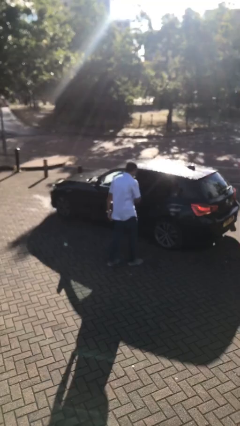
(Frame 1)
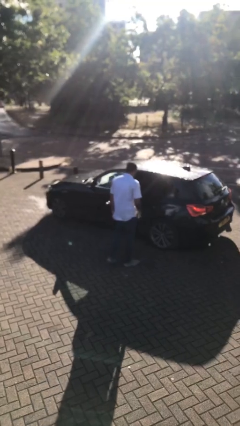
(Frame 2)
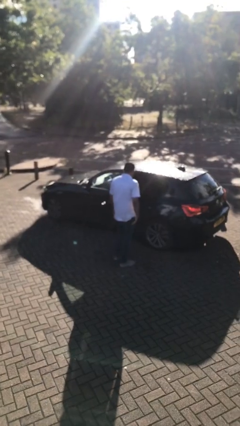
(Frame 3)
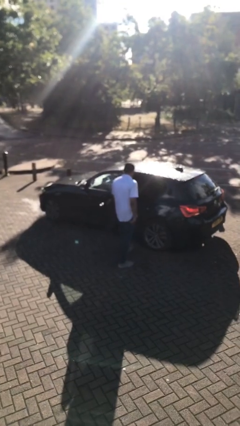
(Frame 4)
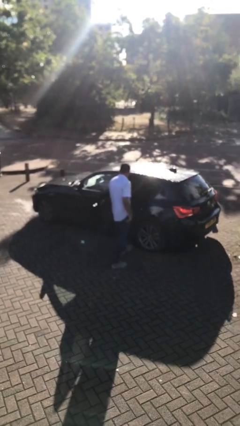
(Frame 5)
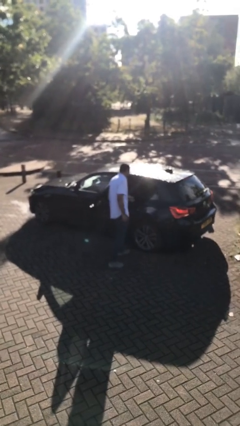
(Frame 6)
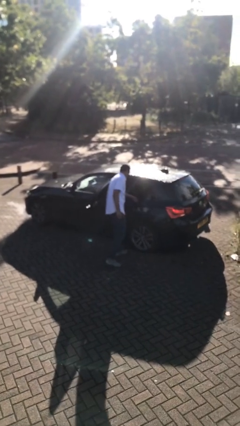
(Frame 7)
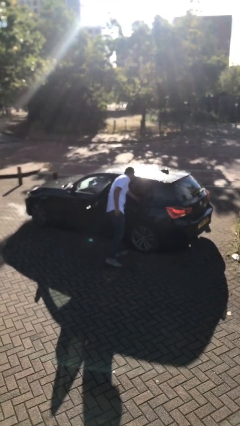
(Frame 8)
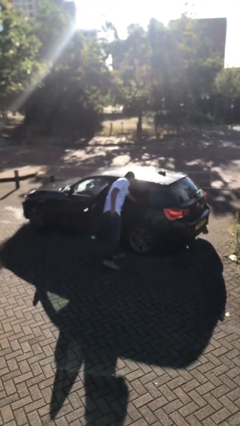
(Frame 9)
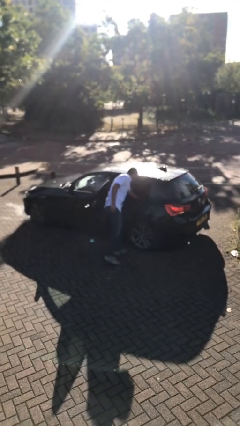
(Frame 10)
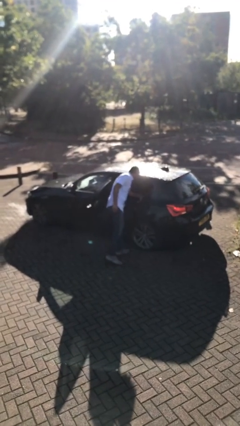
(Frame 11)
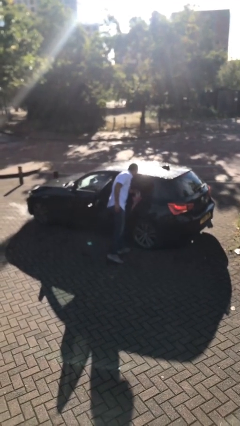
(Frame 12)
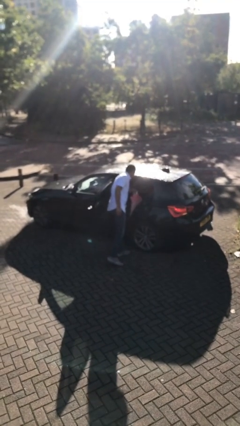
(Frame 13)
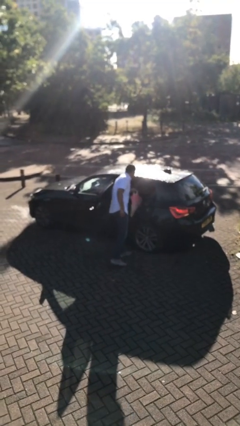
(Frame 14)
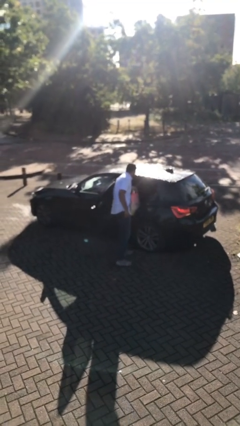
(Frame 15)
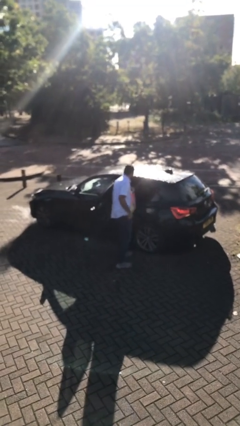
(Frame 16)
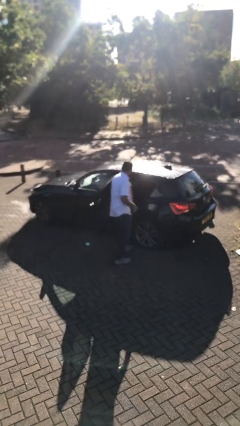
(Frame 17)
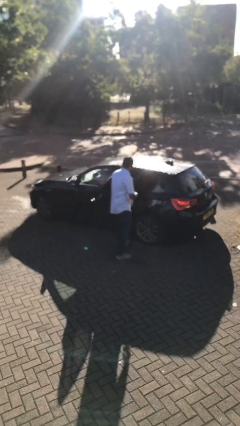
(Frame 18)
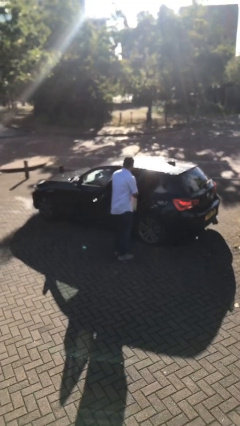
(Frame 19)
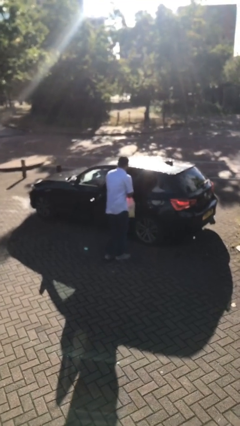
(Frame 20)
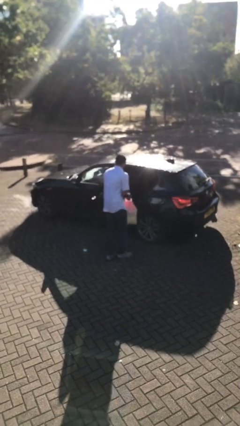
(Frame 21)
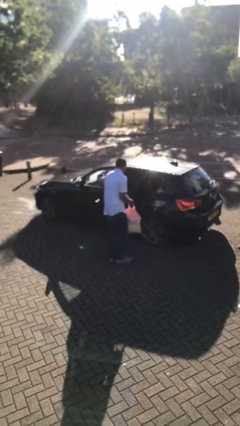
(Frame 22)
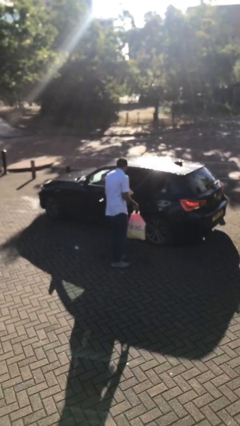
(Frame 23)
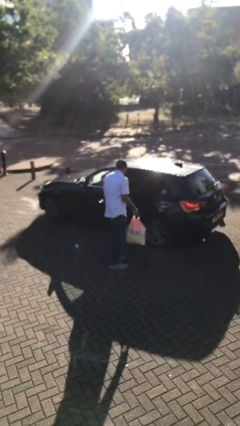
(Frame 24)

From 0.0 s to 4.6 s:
person unloads car

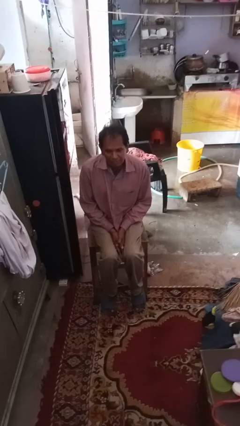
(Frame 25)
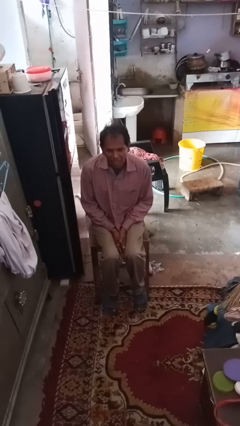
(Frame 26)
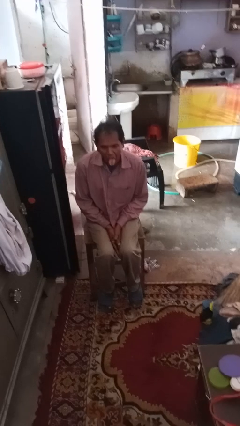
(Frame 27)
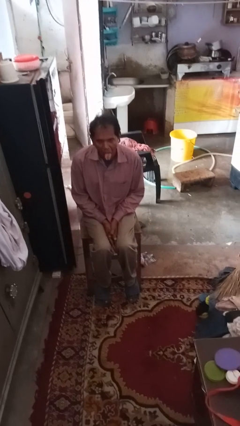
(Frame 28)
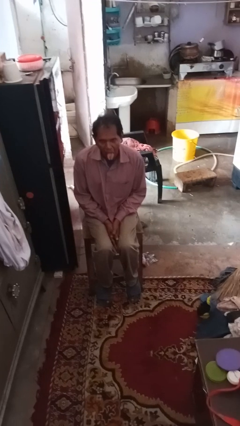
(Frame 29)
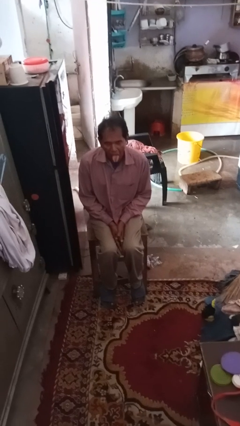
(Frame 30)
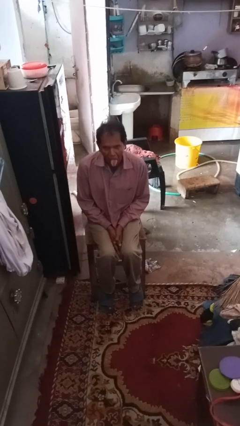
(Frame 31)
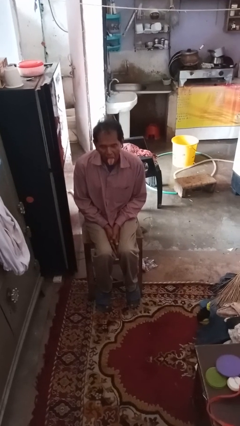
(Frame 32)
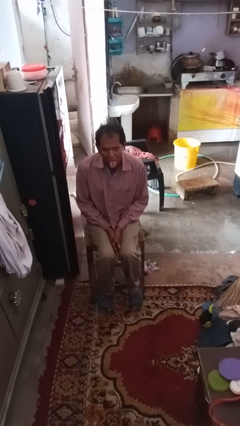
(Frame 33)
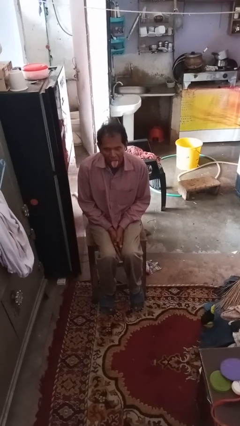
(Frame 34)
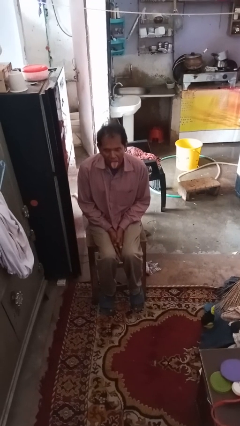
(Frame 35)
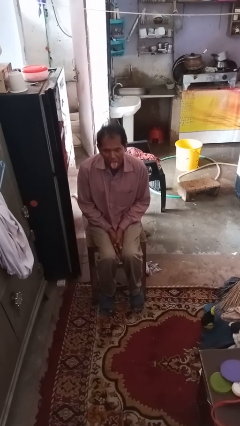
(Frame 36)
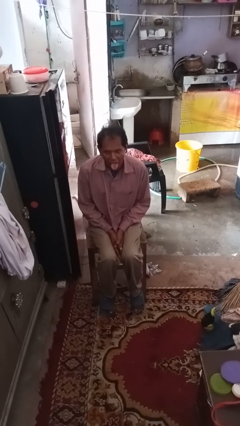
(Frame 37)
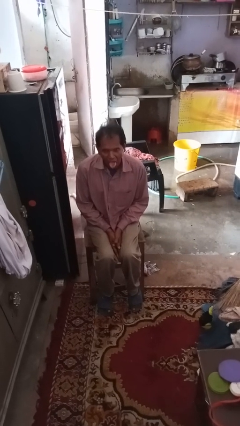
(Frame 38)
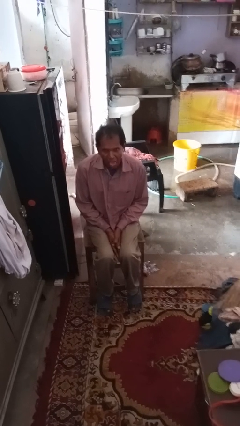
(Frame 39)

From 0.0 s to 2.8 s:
person sticks out tongue

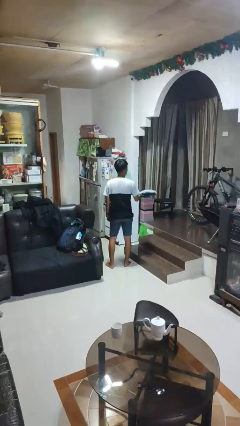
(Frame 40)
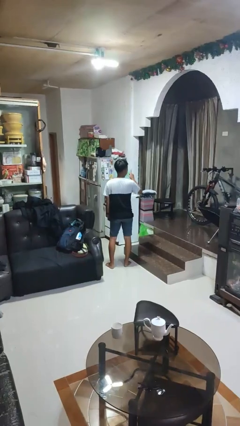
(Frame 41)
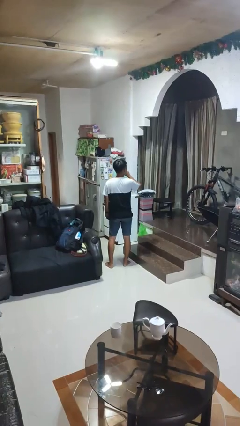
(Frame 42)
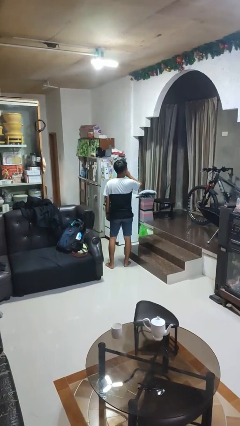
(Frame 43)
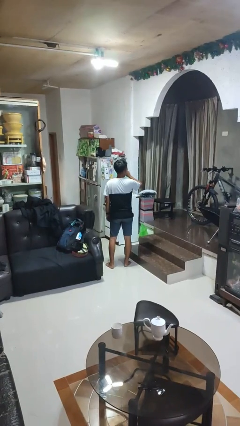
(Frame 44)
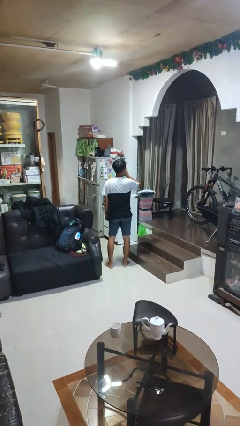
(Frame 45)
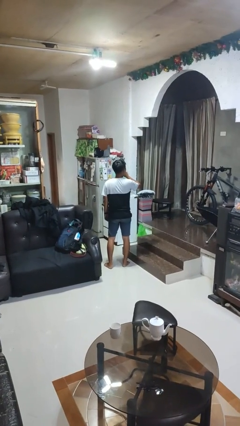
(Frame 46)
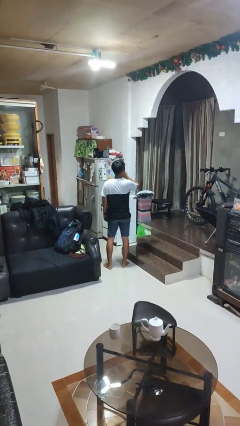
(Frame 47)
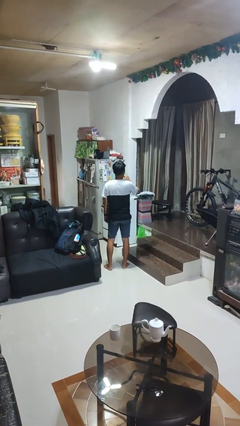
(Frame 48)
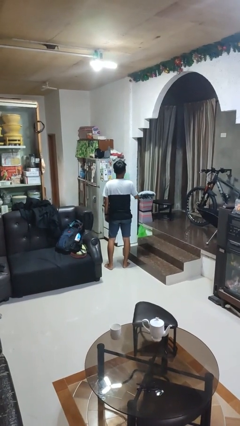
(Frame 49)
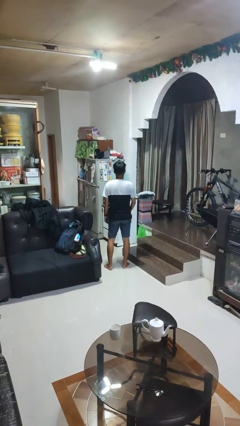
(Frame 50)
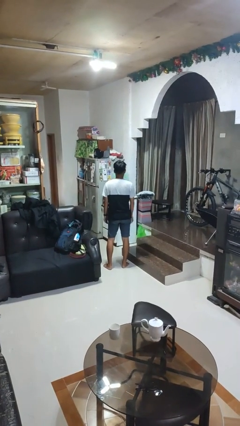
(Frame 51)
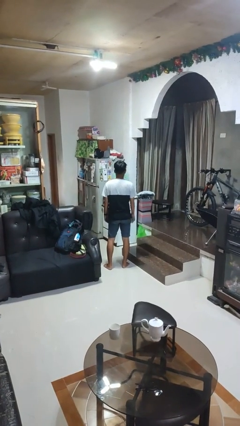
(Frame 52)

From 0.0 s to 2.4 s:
person gestures be quiet

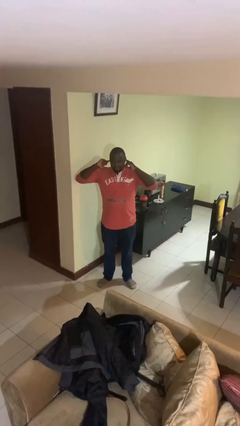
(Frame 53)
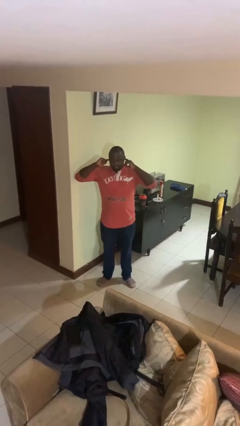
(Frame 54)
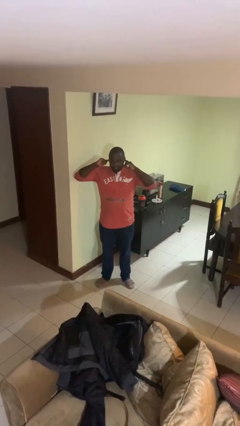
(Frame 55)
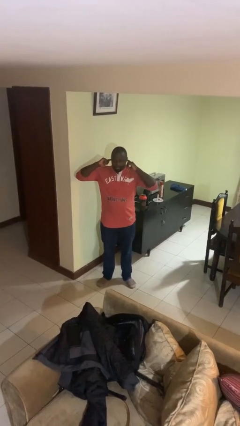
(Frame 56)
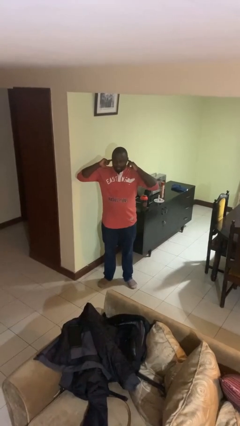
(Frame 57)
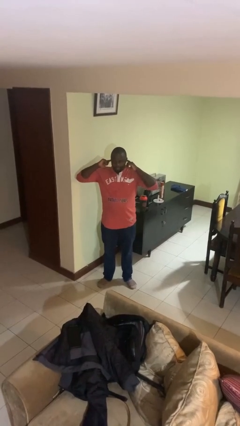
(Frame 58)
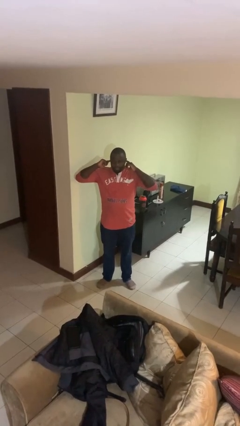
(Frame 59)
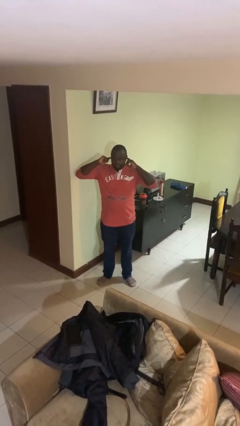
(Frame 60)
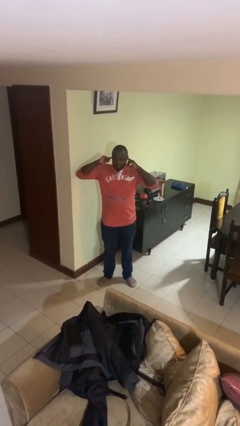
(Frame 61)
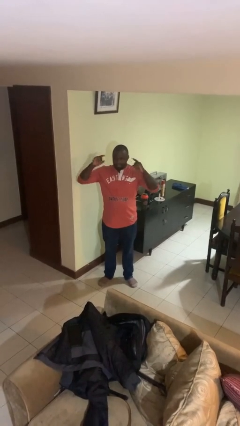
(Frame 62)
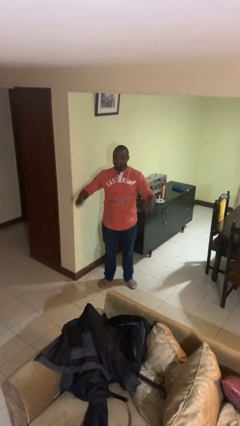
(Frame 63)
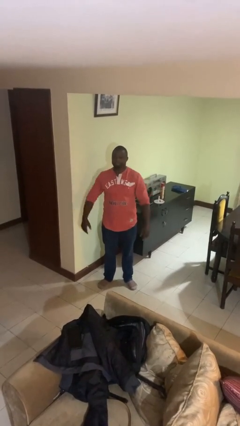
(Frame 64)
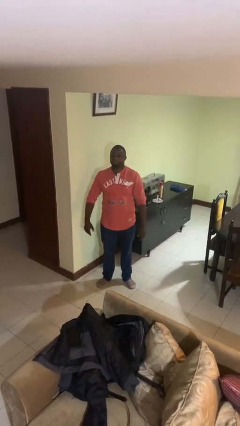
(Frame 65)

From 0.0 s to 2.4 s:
person puts fingers in ear

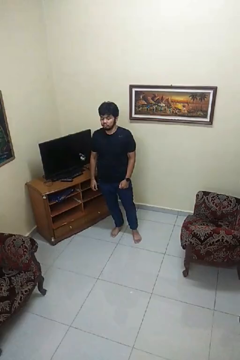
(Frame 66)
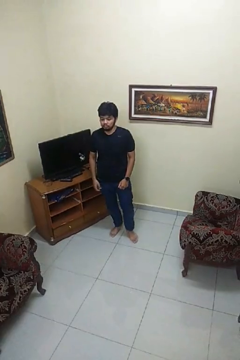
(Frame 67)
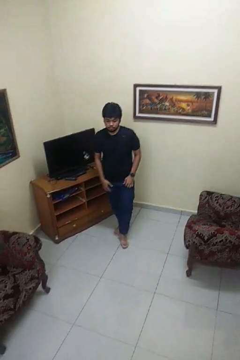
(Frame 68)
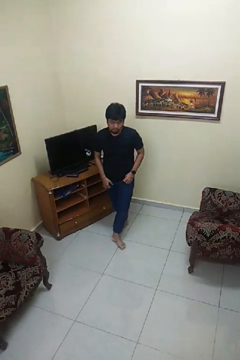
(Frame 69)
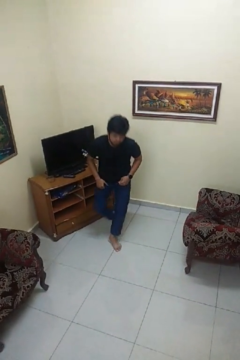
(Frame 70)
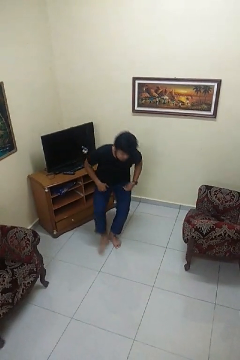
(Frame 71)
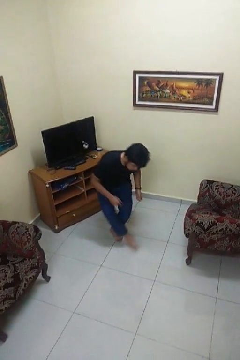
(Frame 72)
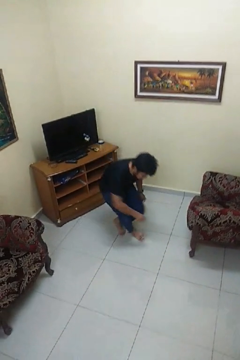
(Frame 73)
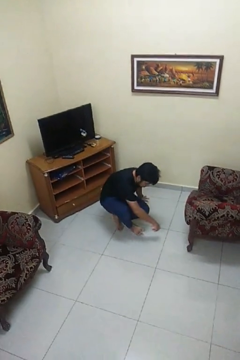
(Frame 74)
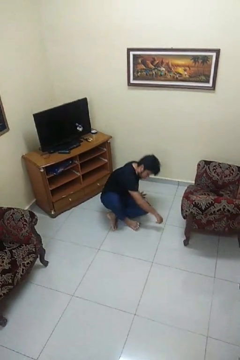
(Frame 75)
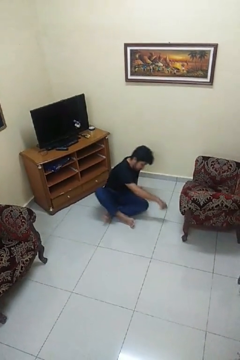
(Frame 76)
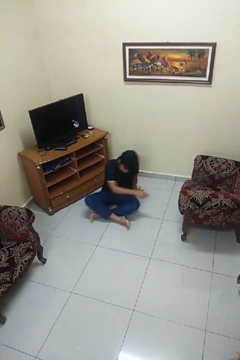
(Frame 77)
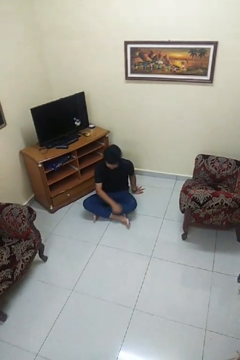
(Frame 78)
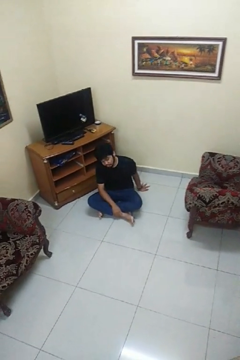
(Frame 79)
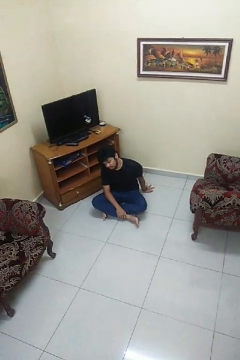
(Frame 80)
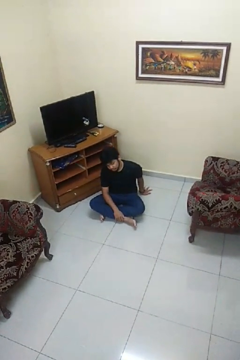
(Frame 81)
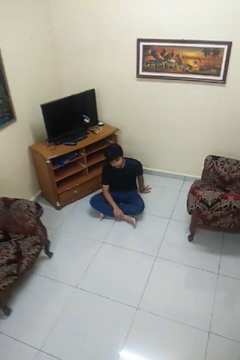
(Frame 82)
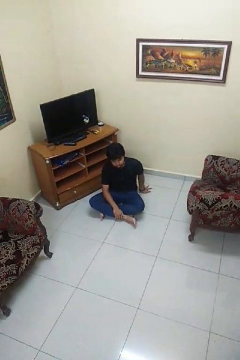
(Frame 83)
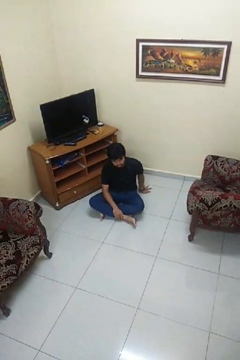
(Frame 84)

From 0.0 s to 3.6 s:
person sits crisscross

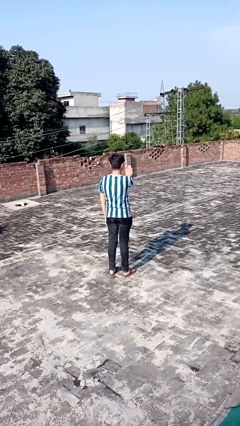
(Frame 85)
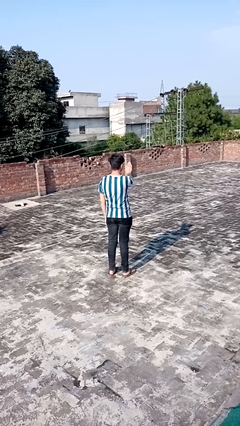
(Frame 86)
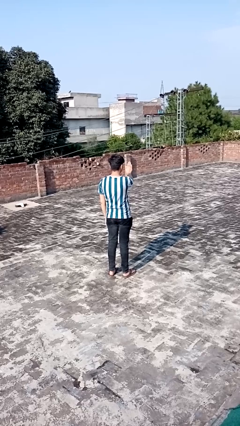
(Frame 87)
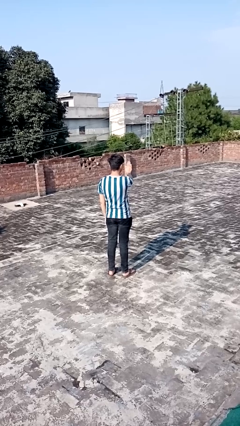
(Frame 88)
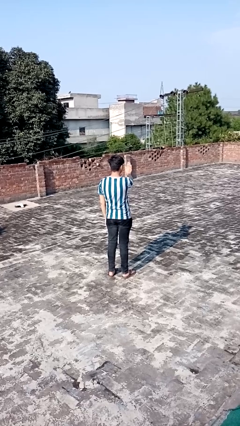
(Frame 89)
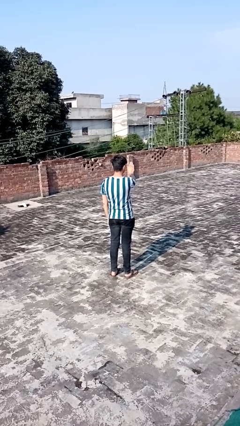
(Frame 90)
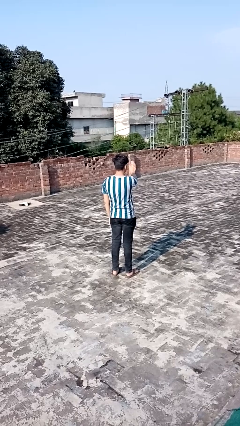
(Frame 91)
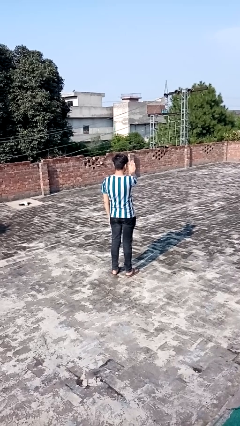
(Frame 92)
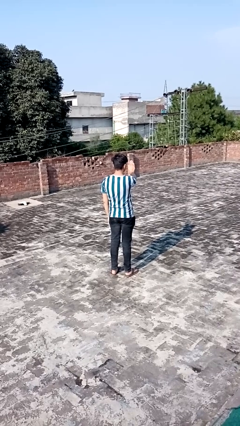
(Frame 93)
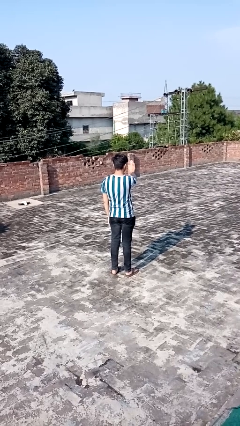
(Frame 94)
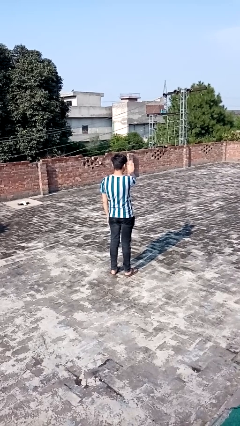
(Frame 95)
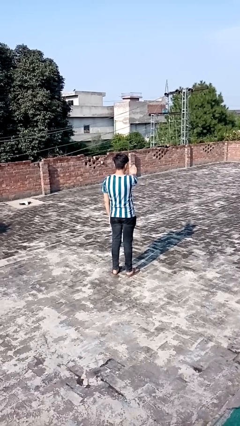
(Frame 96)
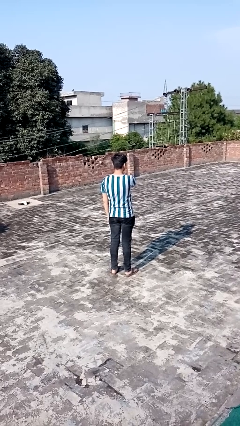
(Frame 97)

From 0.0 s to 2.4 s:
person gestures stop
